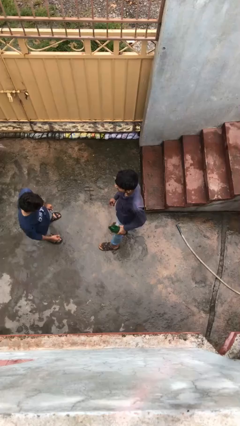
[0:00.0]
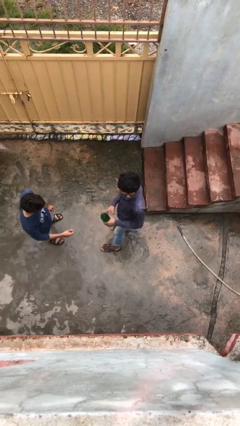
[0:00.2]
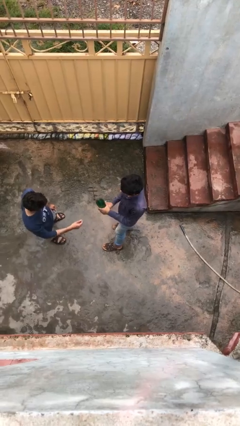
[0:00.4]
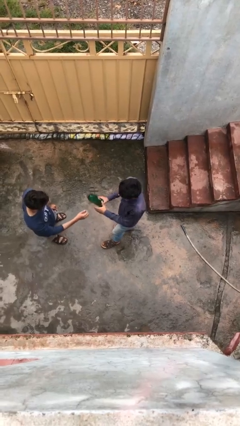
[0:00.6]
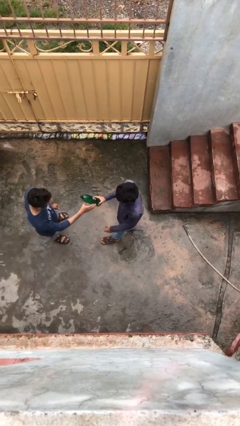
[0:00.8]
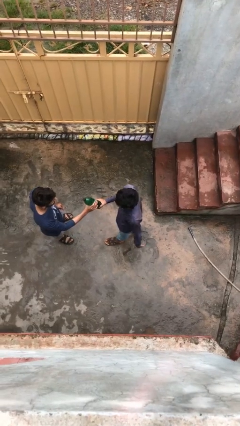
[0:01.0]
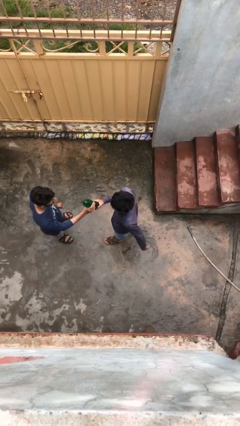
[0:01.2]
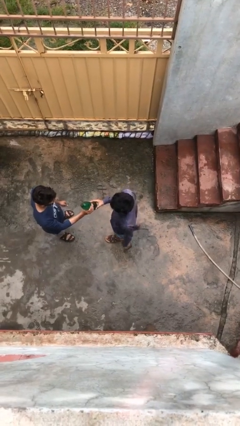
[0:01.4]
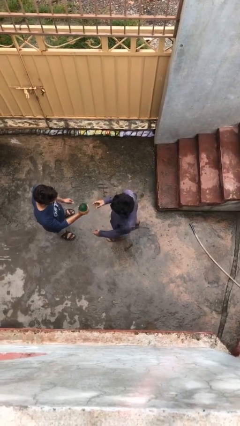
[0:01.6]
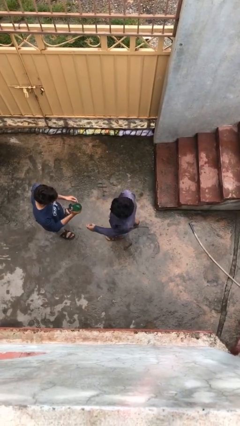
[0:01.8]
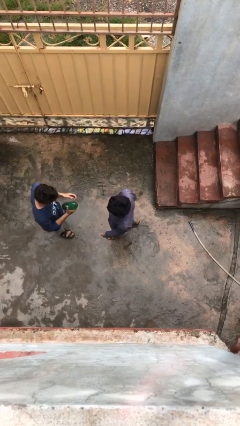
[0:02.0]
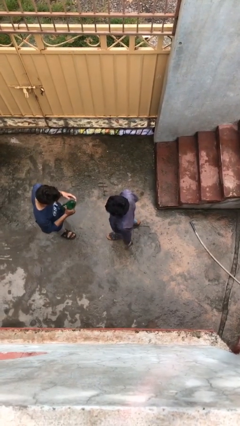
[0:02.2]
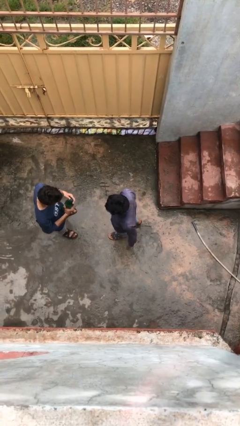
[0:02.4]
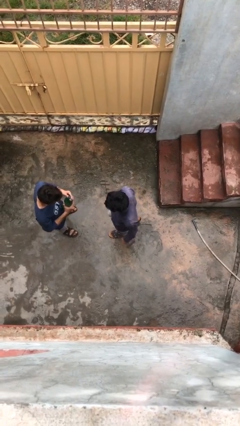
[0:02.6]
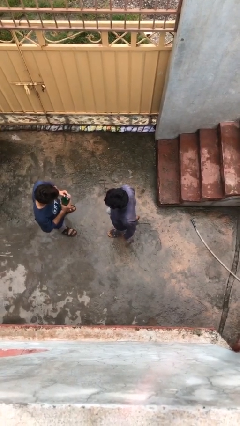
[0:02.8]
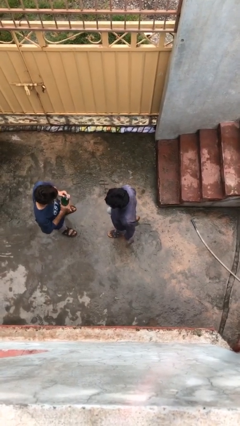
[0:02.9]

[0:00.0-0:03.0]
person transfers object to person

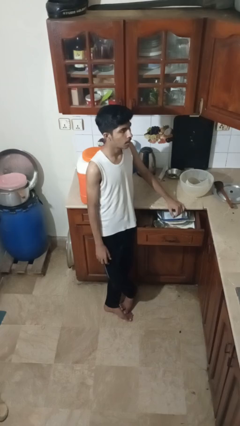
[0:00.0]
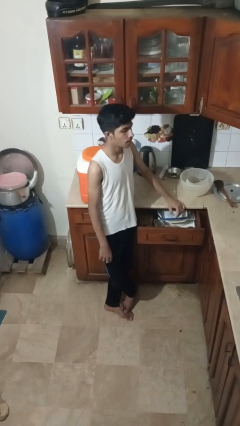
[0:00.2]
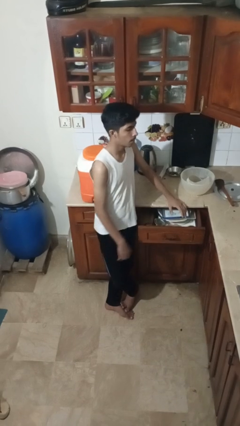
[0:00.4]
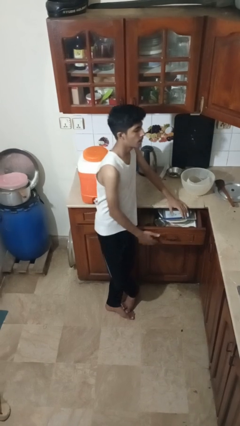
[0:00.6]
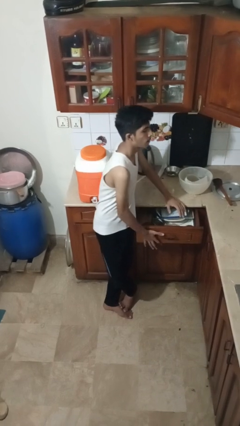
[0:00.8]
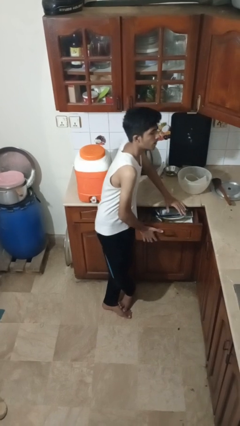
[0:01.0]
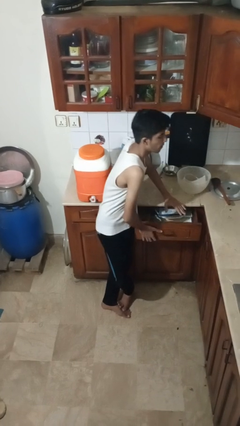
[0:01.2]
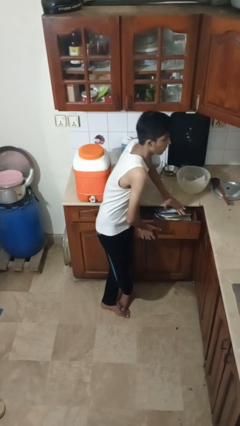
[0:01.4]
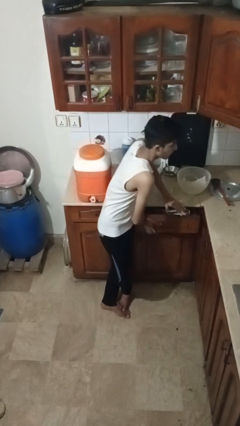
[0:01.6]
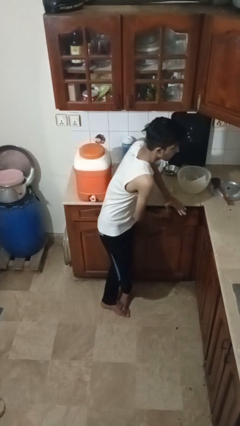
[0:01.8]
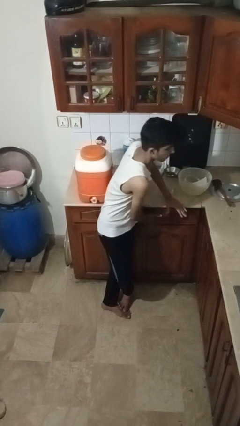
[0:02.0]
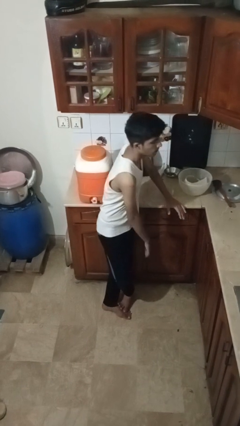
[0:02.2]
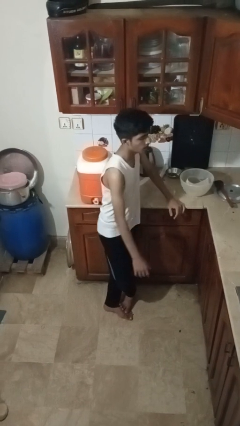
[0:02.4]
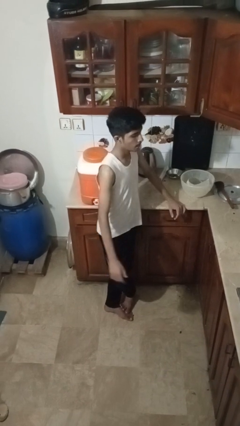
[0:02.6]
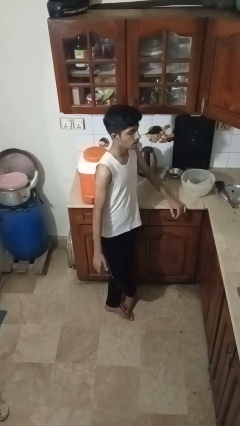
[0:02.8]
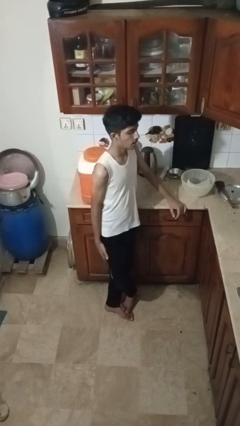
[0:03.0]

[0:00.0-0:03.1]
person closes kitchen drawer

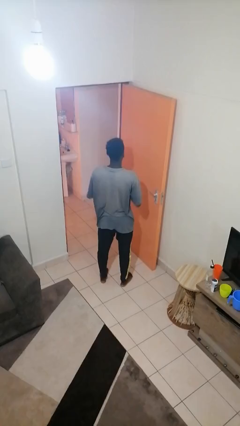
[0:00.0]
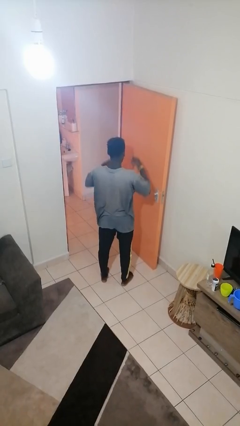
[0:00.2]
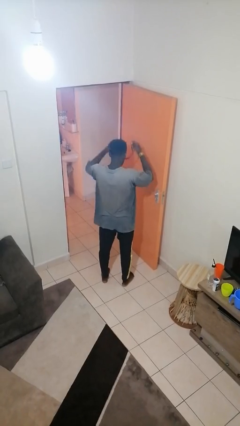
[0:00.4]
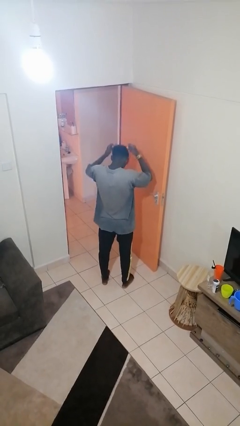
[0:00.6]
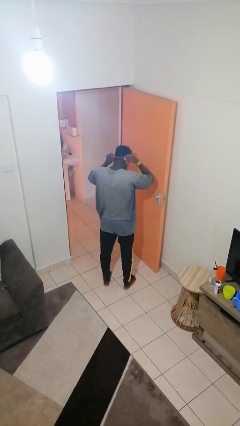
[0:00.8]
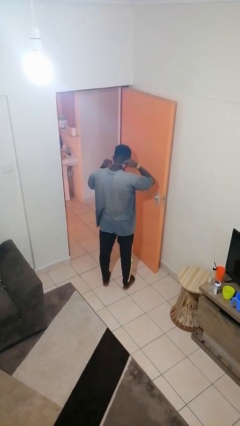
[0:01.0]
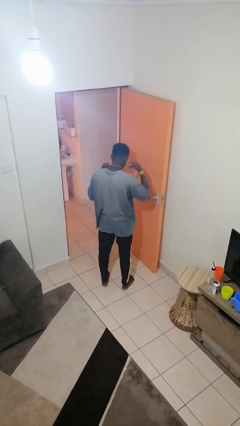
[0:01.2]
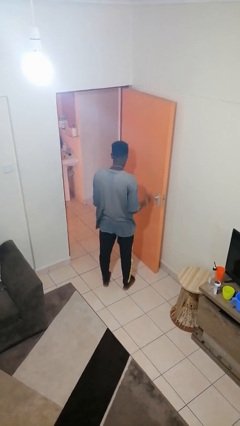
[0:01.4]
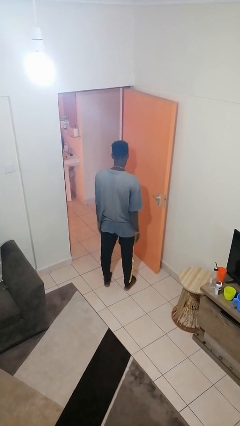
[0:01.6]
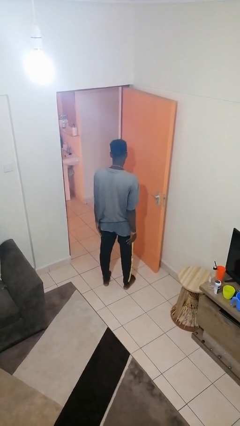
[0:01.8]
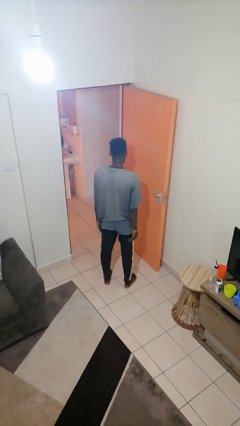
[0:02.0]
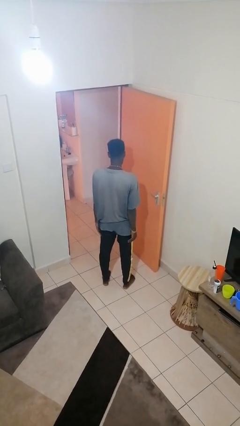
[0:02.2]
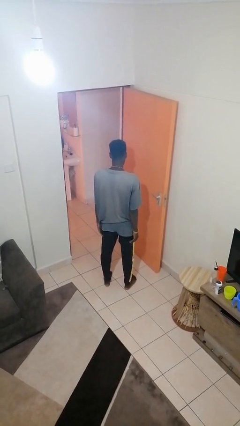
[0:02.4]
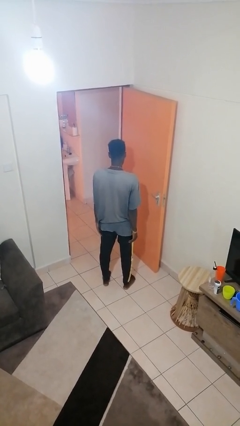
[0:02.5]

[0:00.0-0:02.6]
person puts on necklace

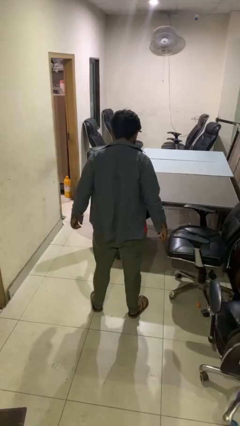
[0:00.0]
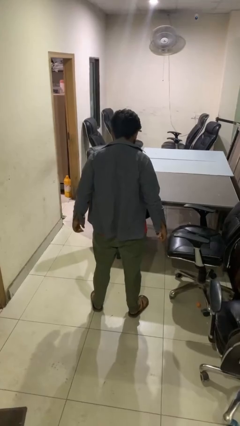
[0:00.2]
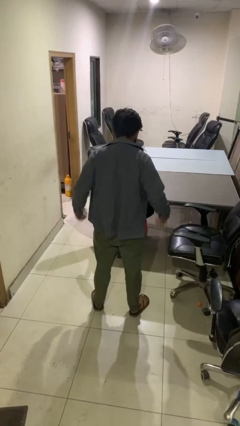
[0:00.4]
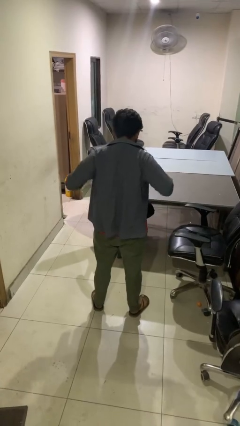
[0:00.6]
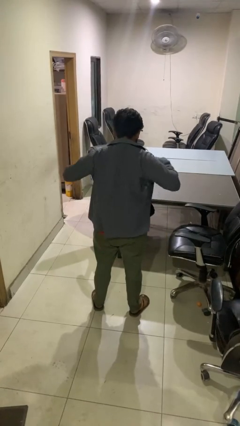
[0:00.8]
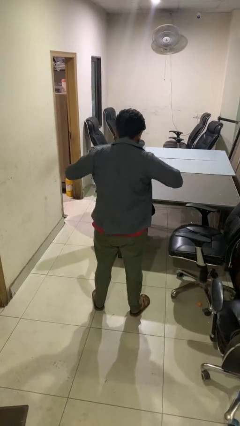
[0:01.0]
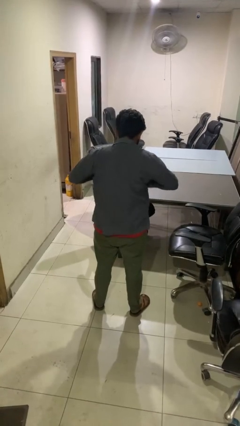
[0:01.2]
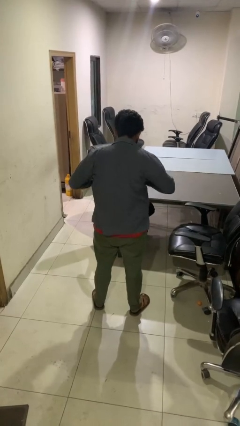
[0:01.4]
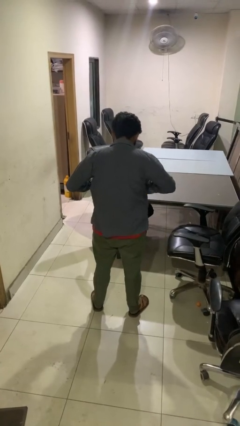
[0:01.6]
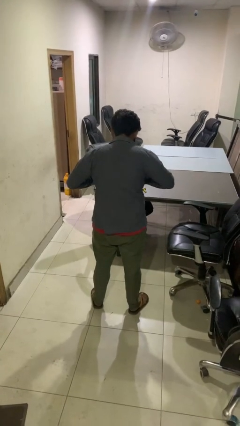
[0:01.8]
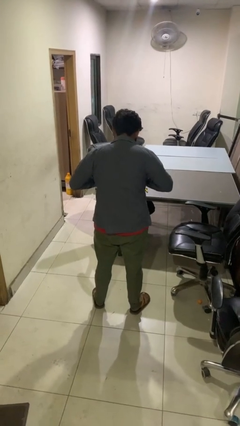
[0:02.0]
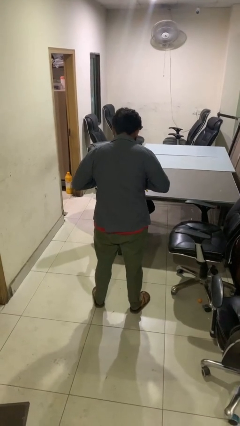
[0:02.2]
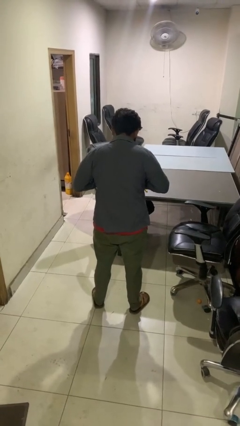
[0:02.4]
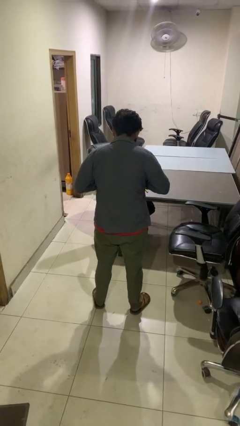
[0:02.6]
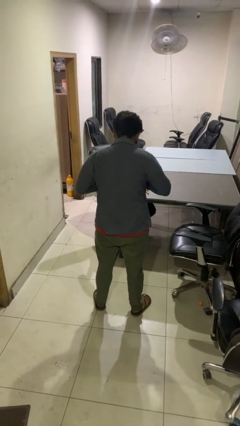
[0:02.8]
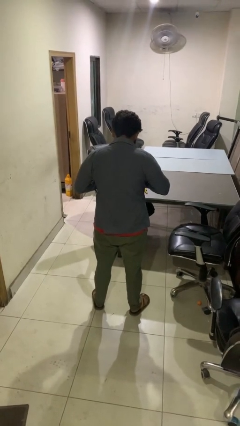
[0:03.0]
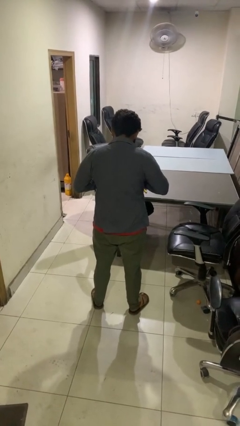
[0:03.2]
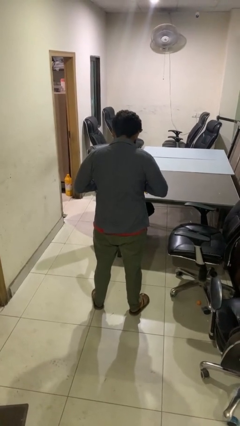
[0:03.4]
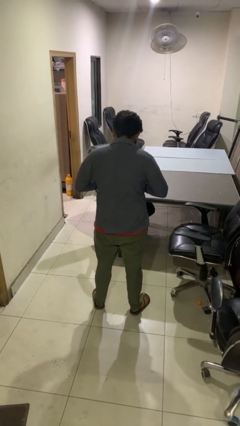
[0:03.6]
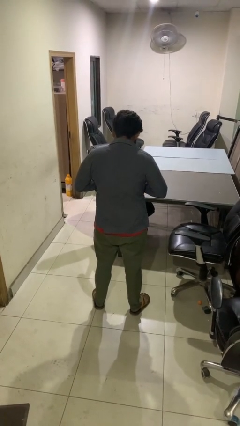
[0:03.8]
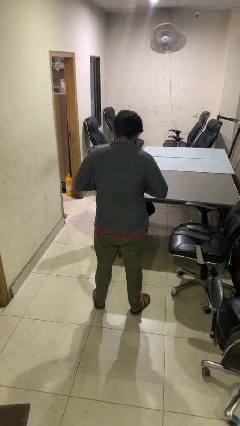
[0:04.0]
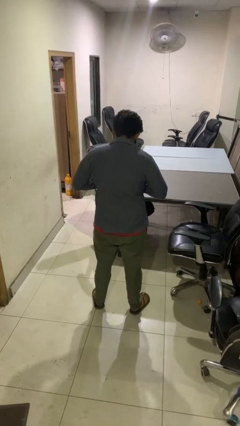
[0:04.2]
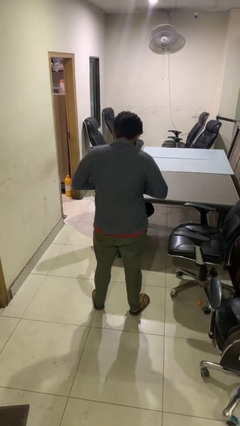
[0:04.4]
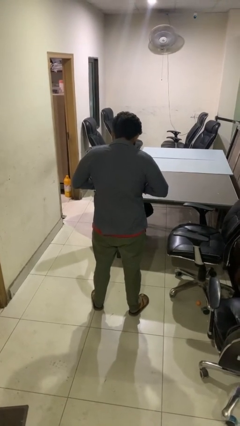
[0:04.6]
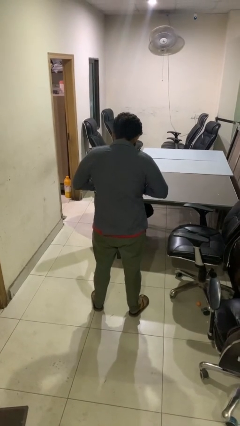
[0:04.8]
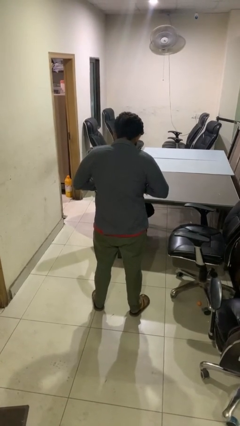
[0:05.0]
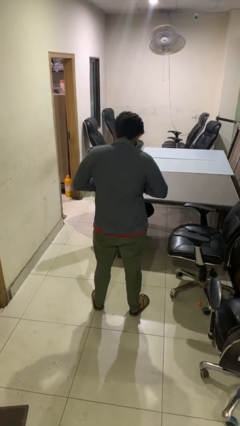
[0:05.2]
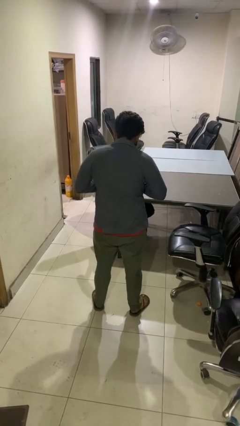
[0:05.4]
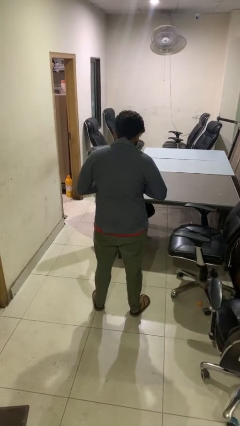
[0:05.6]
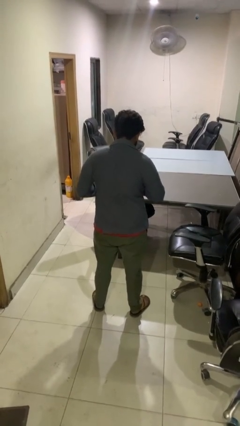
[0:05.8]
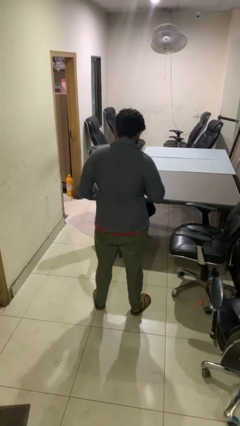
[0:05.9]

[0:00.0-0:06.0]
person buttons shirt

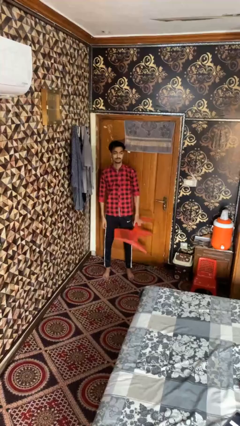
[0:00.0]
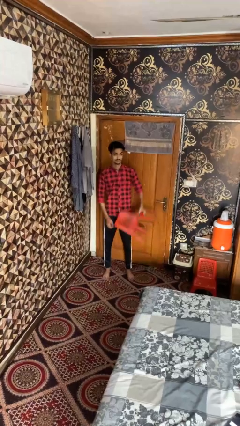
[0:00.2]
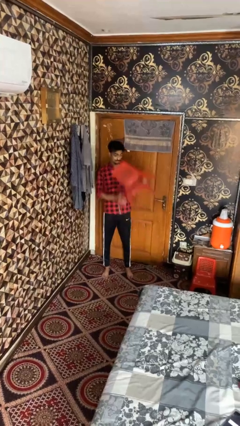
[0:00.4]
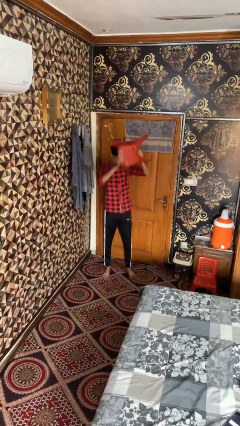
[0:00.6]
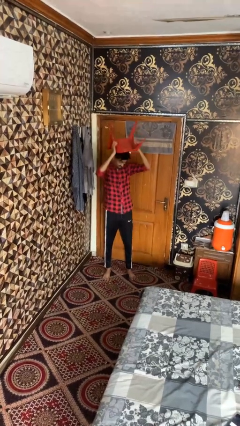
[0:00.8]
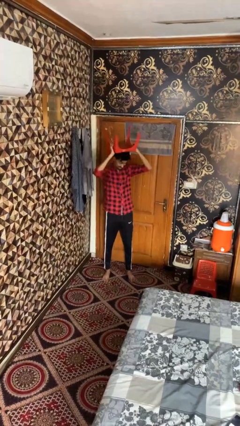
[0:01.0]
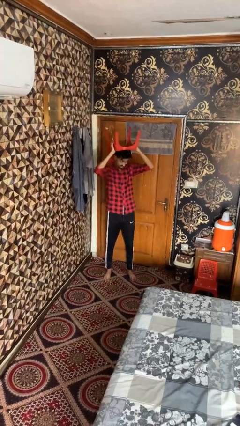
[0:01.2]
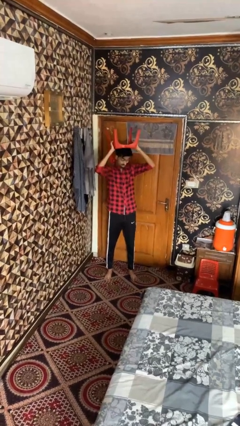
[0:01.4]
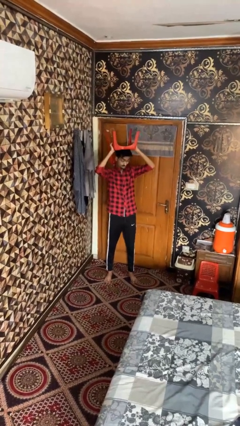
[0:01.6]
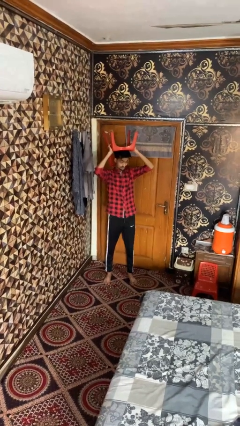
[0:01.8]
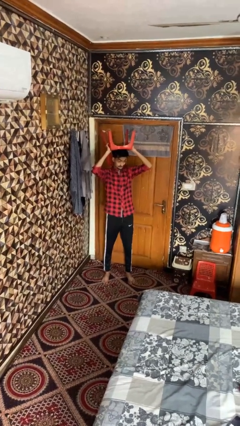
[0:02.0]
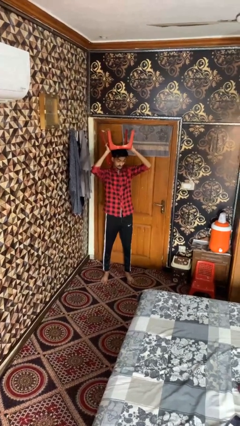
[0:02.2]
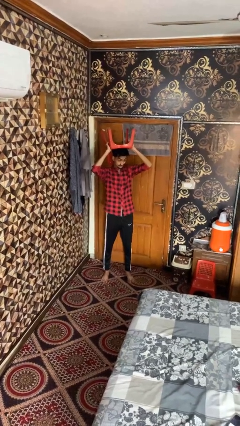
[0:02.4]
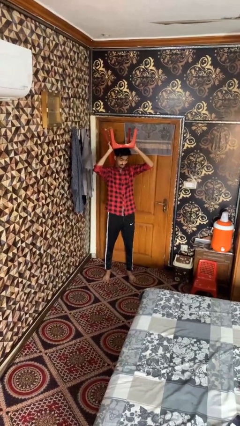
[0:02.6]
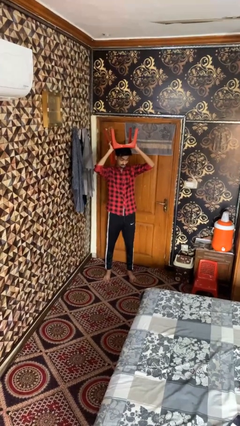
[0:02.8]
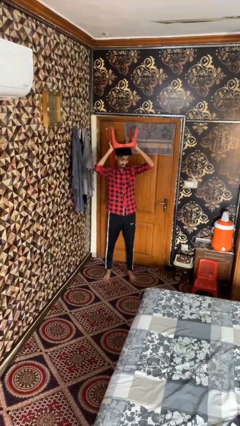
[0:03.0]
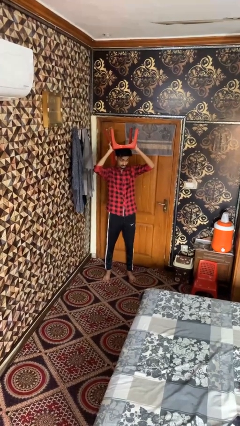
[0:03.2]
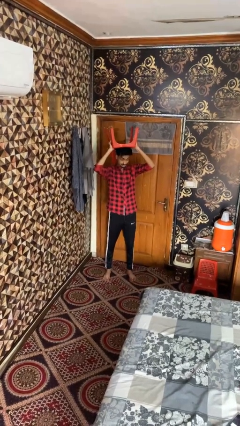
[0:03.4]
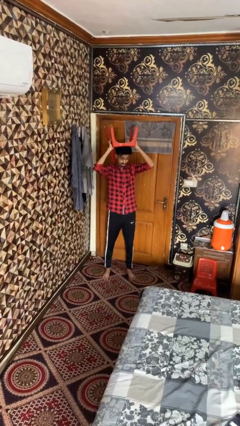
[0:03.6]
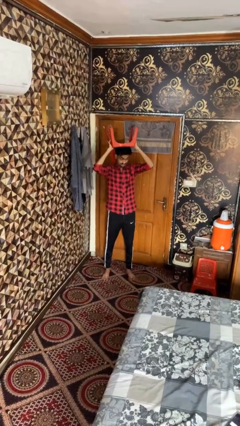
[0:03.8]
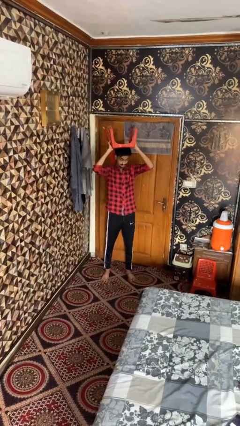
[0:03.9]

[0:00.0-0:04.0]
person holds object above head
